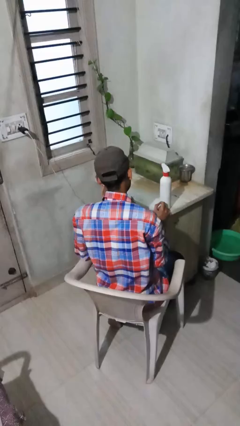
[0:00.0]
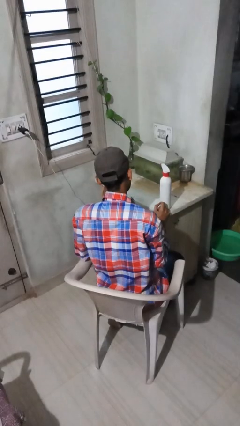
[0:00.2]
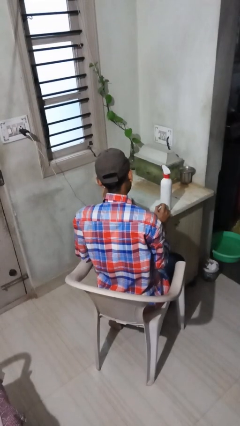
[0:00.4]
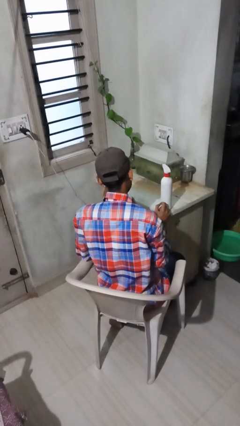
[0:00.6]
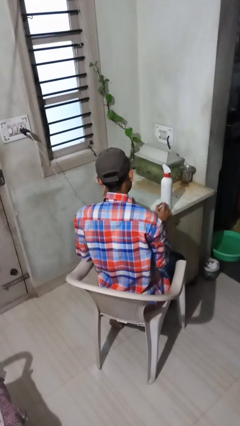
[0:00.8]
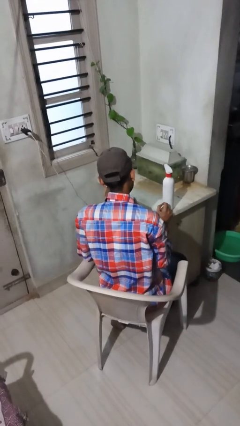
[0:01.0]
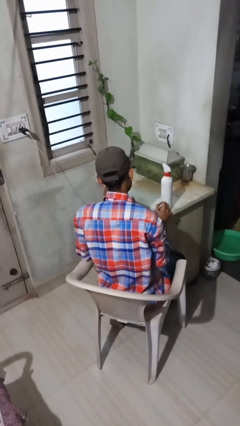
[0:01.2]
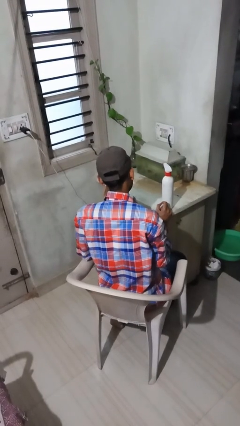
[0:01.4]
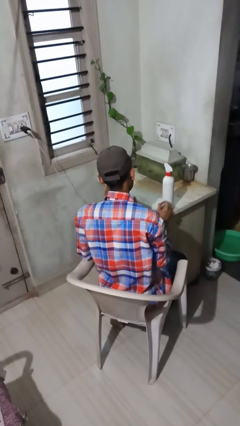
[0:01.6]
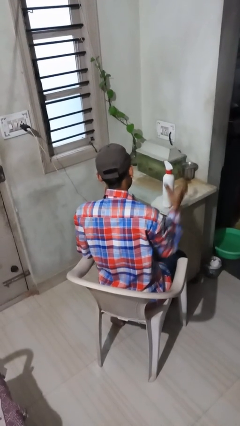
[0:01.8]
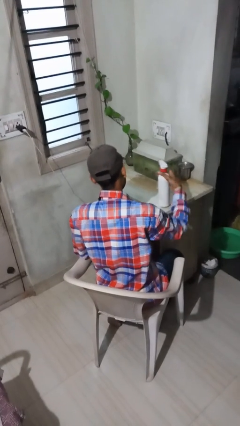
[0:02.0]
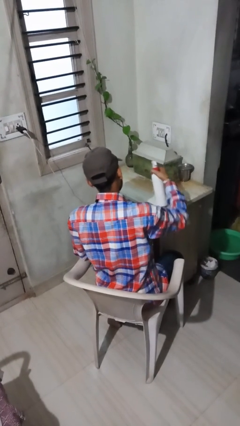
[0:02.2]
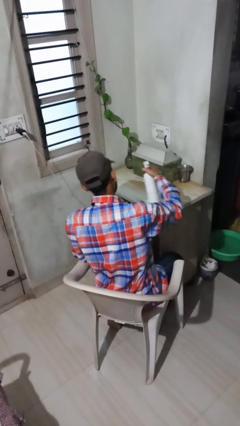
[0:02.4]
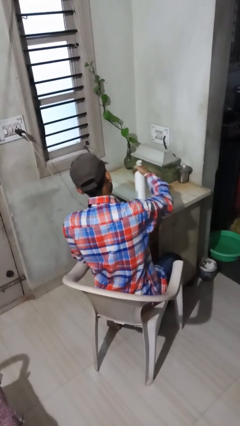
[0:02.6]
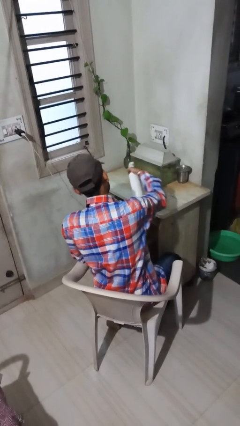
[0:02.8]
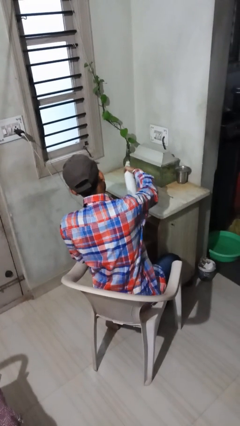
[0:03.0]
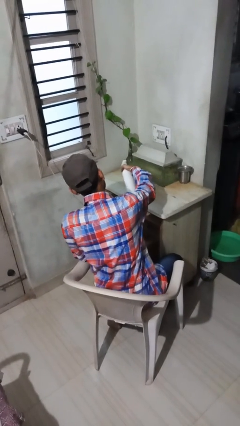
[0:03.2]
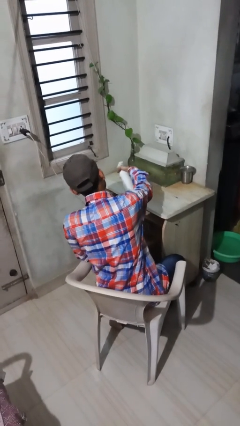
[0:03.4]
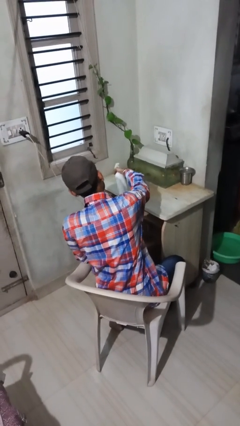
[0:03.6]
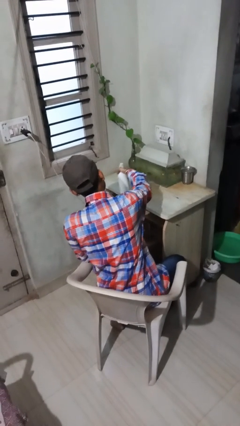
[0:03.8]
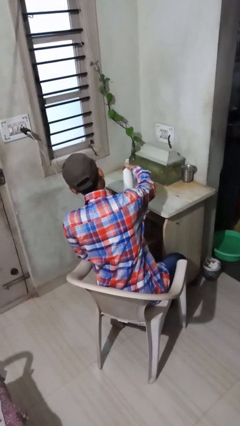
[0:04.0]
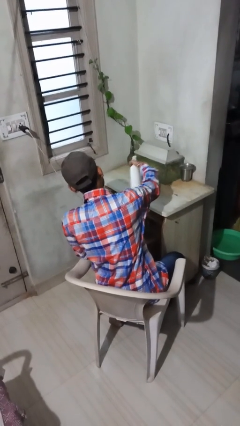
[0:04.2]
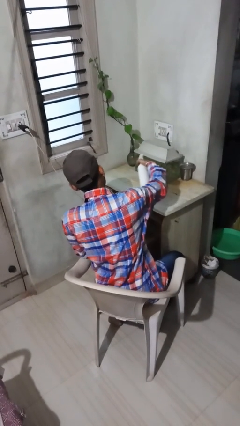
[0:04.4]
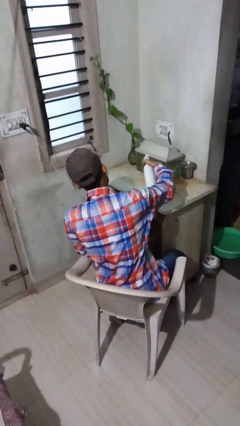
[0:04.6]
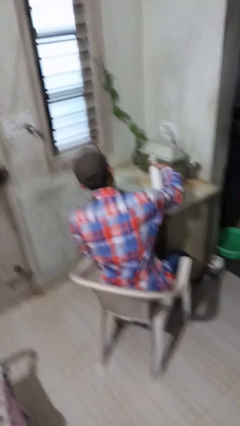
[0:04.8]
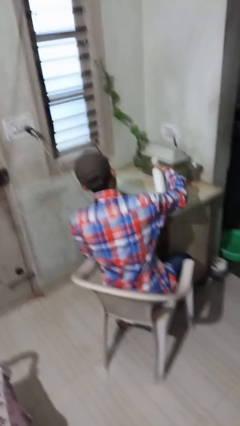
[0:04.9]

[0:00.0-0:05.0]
person sprays from bottle

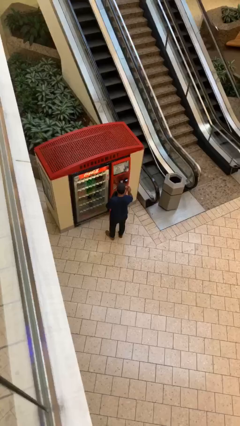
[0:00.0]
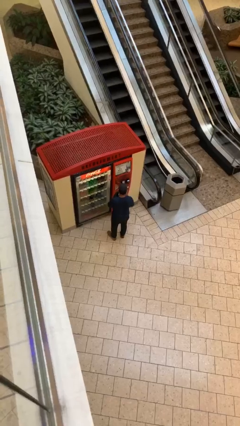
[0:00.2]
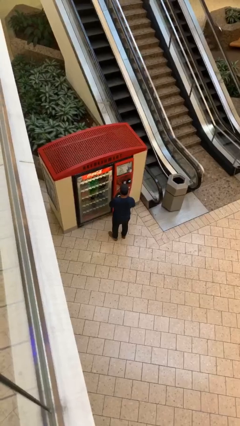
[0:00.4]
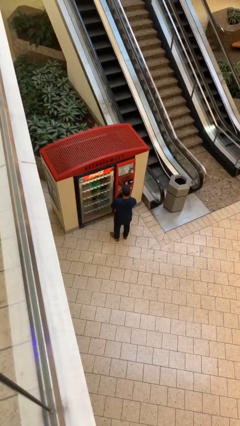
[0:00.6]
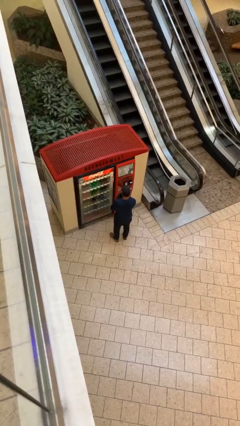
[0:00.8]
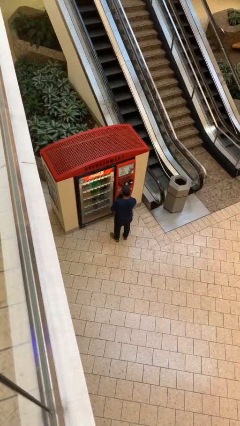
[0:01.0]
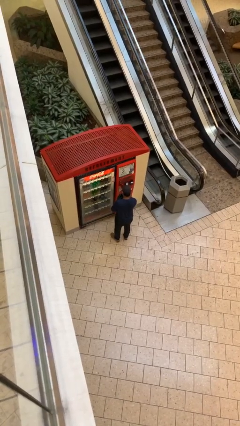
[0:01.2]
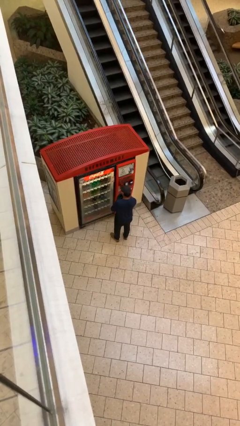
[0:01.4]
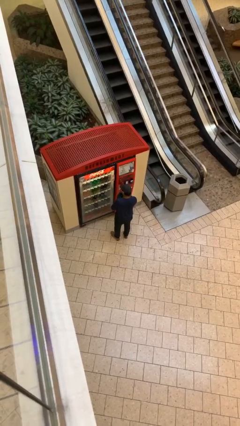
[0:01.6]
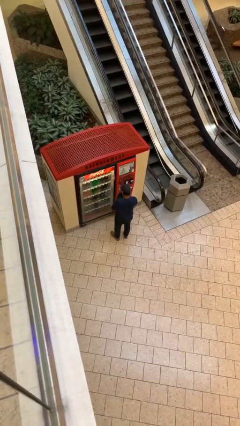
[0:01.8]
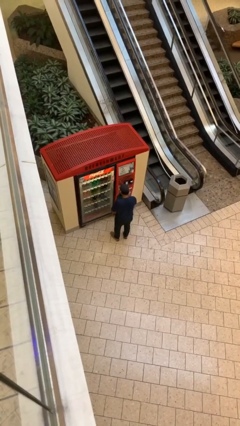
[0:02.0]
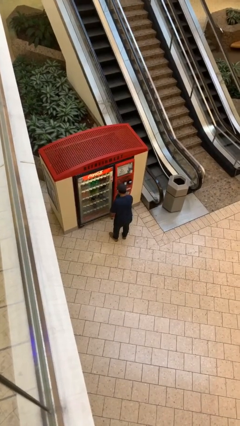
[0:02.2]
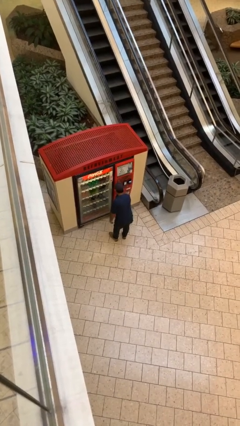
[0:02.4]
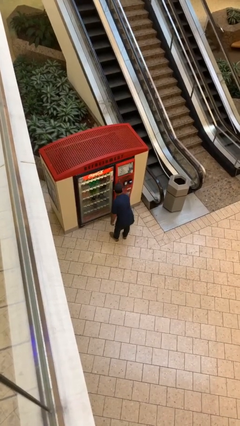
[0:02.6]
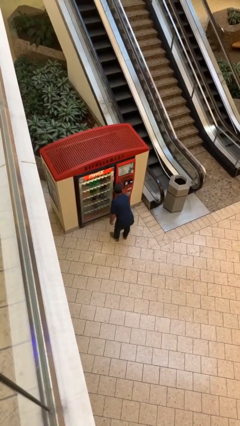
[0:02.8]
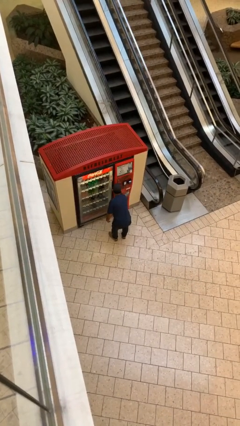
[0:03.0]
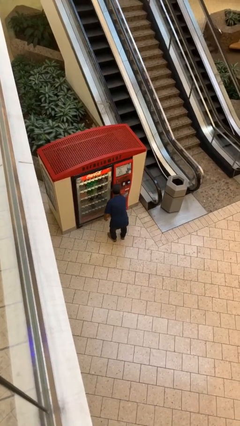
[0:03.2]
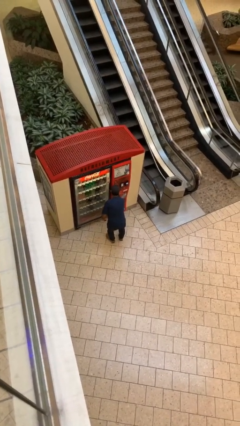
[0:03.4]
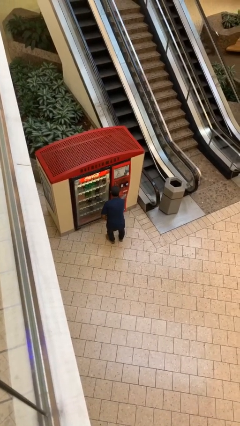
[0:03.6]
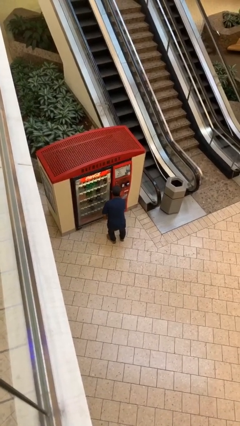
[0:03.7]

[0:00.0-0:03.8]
person purchases from machine

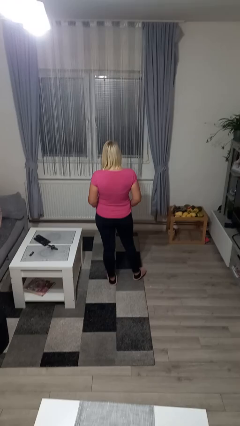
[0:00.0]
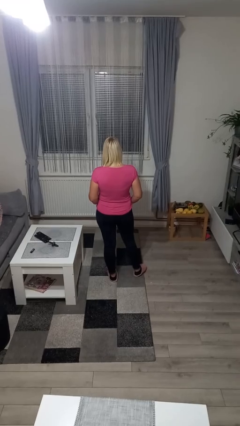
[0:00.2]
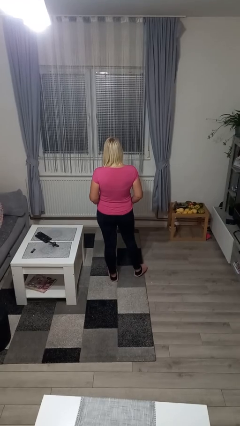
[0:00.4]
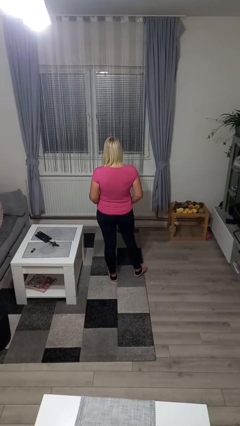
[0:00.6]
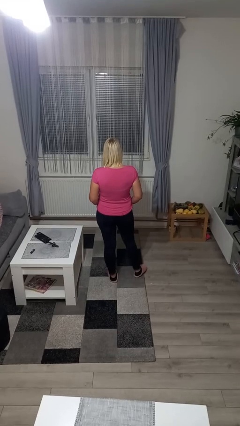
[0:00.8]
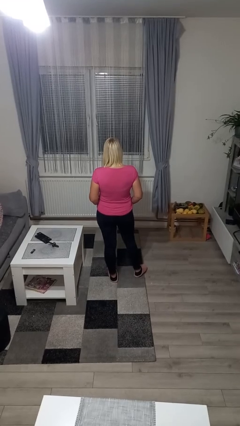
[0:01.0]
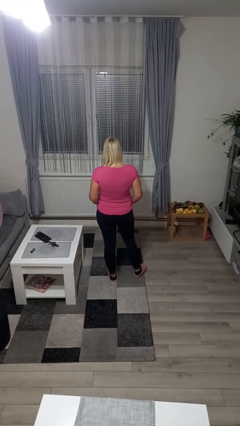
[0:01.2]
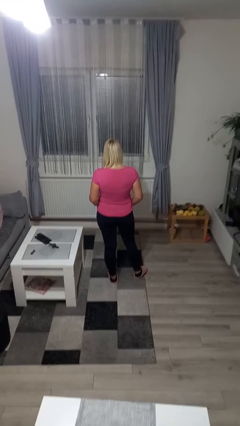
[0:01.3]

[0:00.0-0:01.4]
person puts hands in back pockets

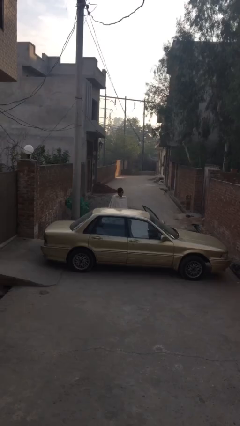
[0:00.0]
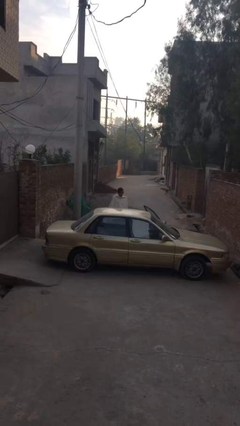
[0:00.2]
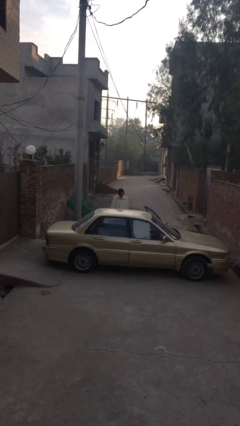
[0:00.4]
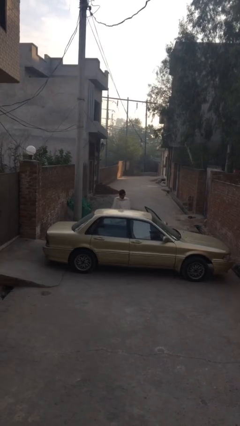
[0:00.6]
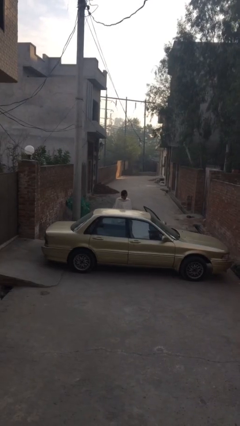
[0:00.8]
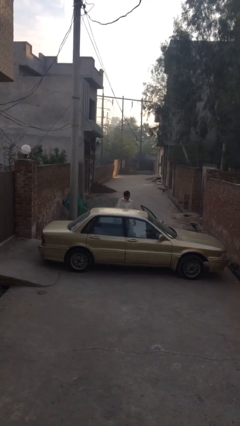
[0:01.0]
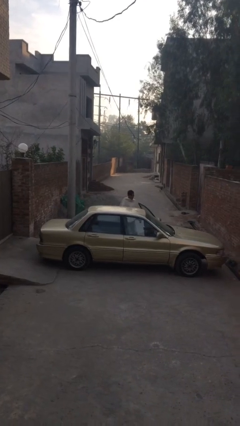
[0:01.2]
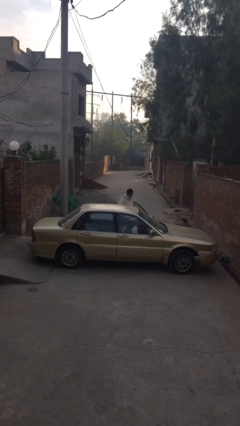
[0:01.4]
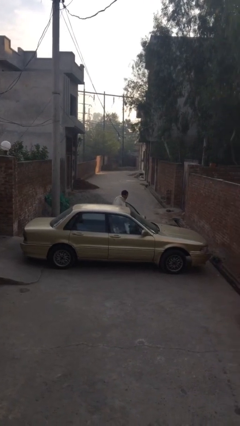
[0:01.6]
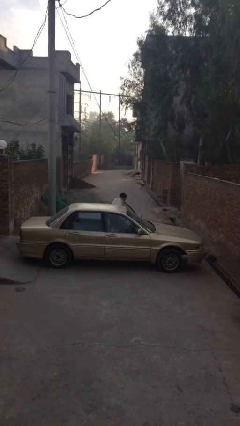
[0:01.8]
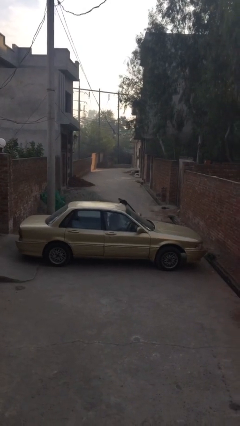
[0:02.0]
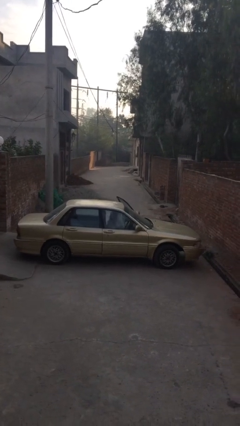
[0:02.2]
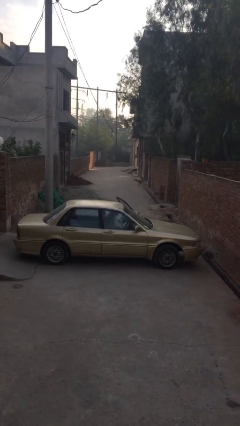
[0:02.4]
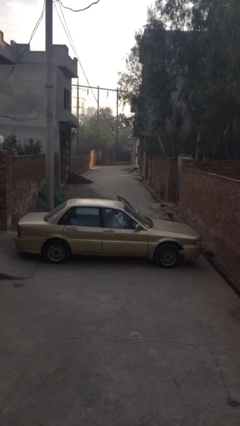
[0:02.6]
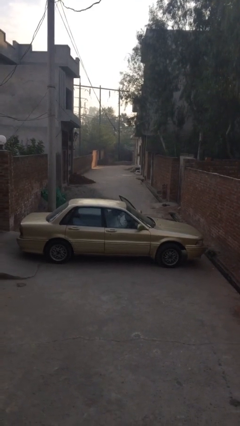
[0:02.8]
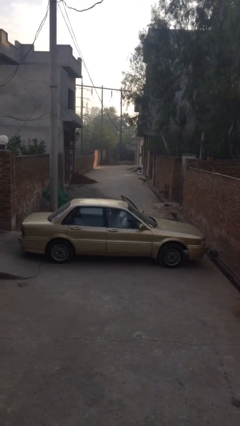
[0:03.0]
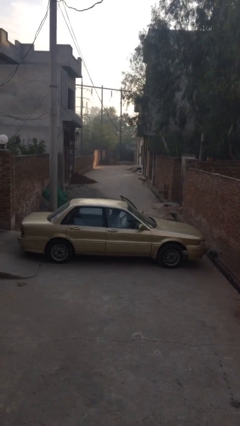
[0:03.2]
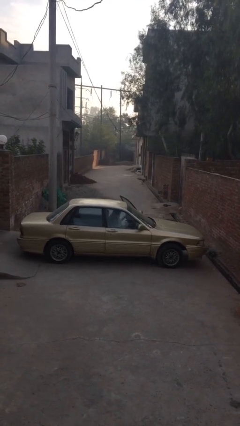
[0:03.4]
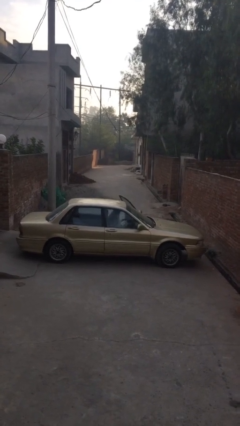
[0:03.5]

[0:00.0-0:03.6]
person enters car

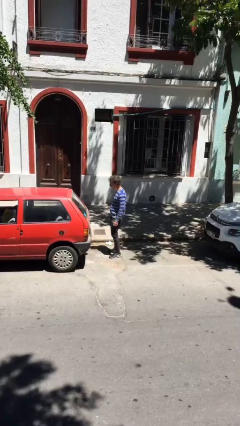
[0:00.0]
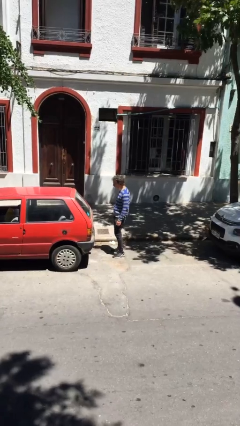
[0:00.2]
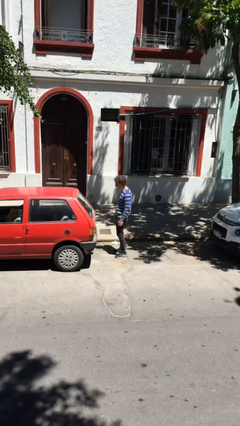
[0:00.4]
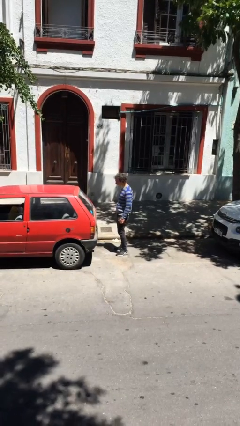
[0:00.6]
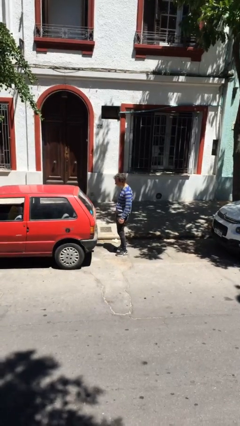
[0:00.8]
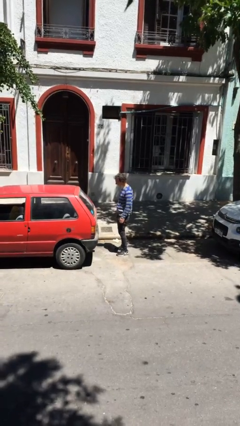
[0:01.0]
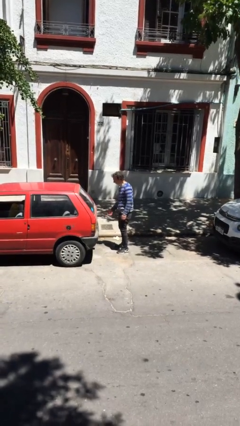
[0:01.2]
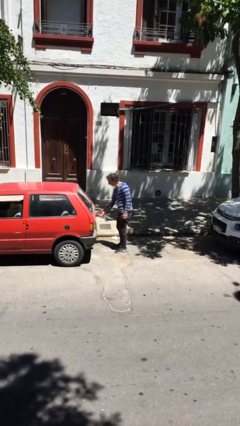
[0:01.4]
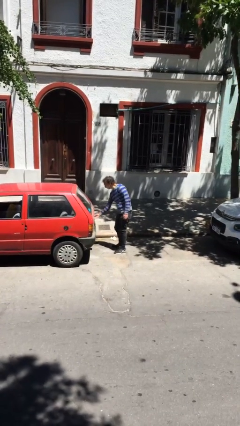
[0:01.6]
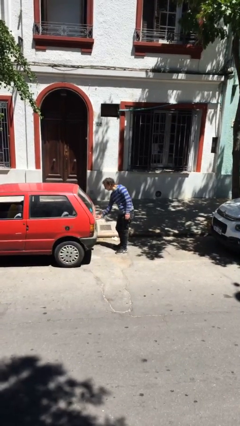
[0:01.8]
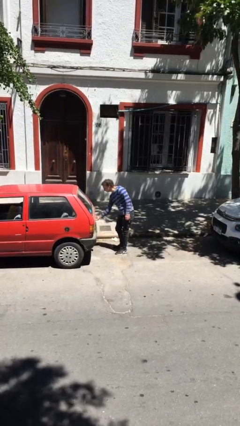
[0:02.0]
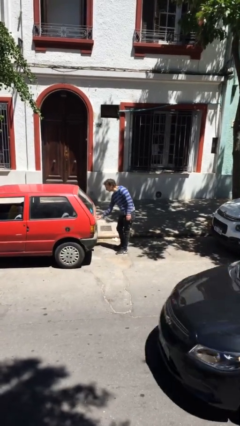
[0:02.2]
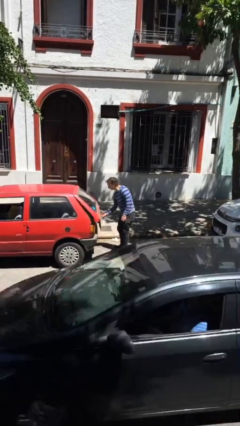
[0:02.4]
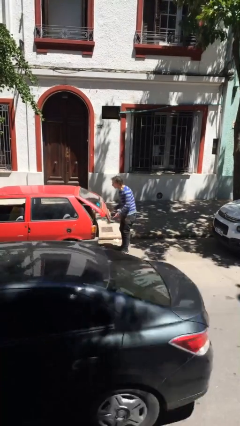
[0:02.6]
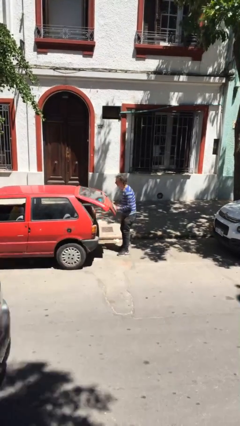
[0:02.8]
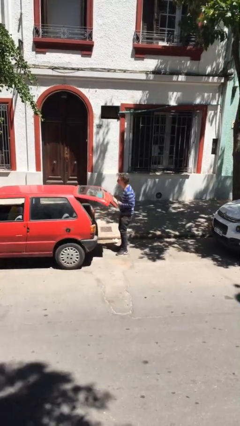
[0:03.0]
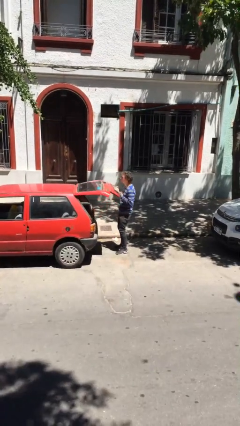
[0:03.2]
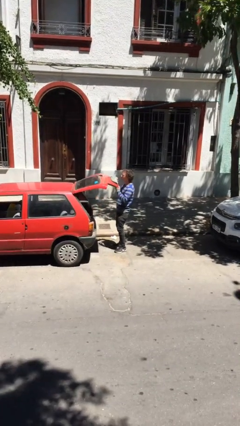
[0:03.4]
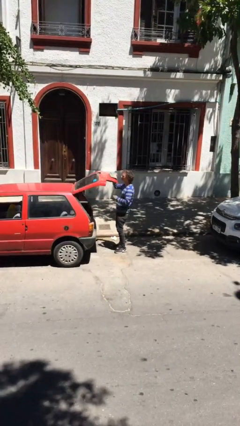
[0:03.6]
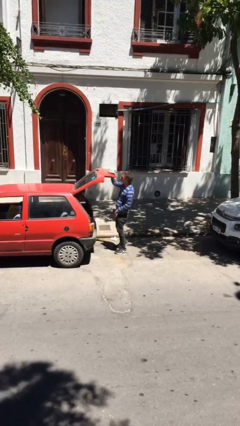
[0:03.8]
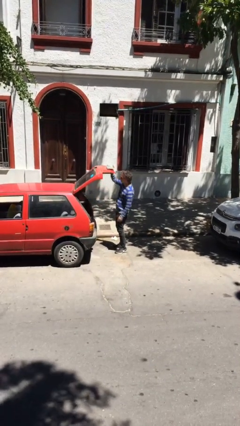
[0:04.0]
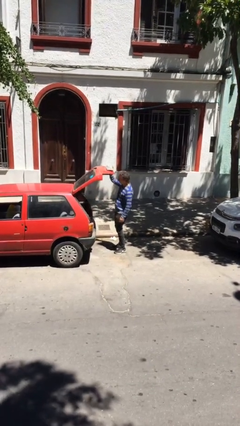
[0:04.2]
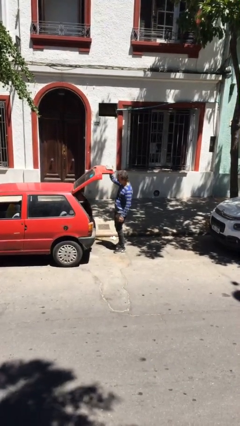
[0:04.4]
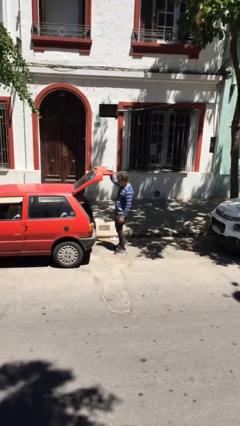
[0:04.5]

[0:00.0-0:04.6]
person opens car trunk
